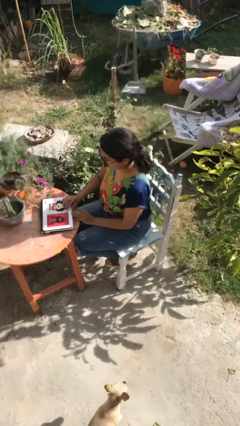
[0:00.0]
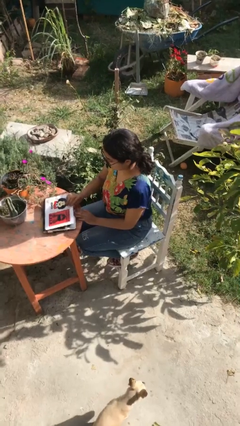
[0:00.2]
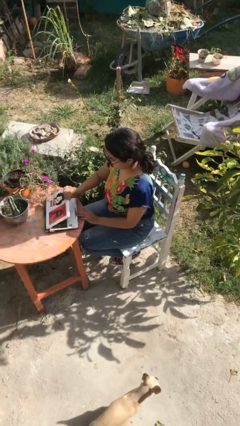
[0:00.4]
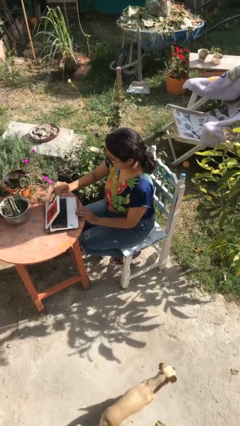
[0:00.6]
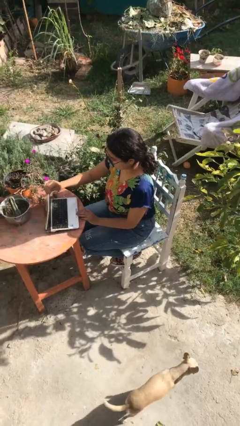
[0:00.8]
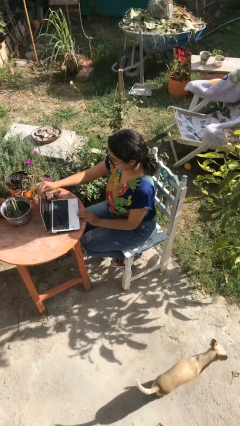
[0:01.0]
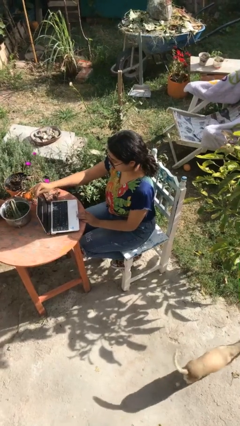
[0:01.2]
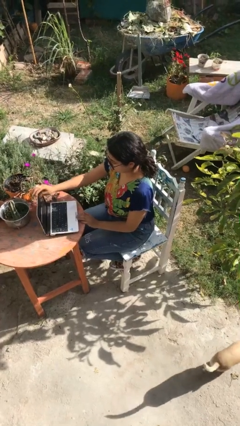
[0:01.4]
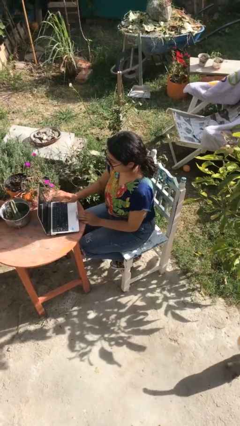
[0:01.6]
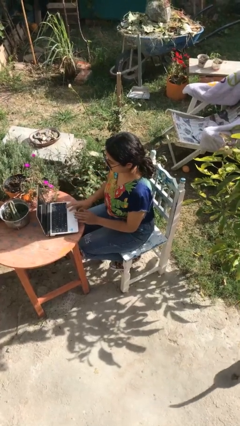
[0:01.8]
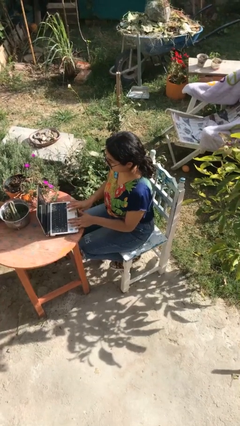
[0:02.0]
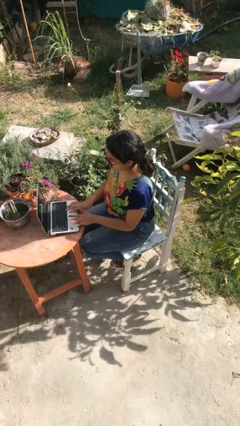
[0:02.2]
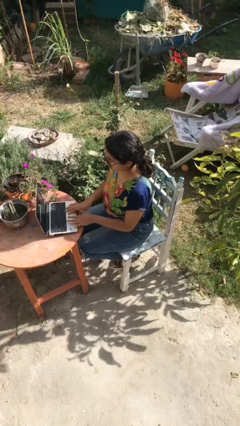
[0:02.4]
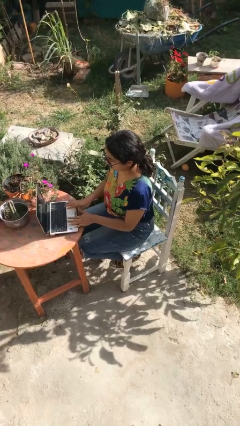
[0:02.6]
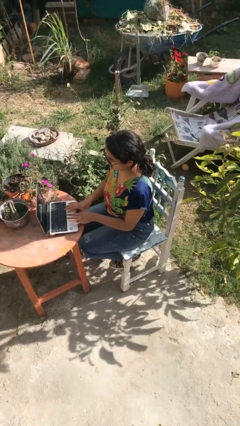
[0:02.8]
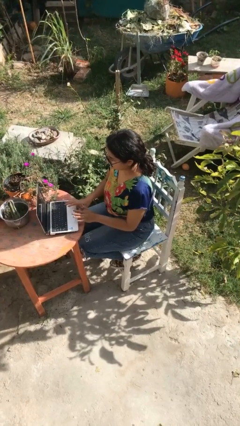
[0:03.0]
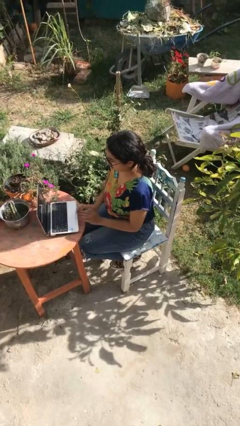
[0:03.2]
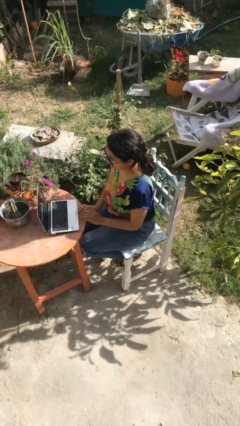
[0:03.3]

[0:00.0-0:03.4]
person opens laptop

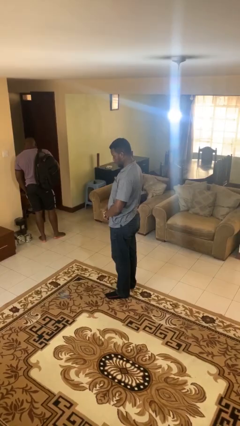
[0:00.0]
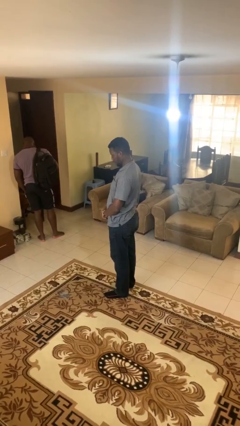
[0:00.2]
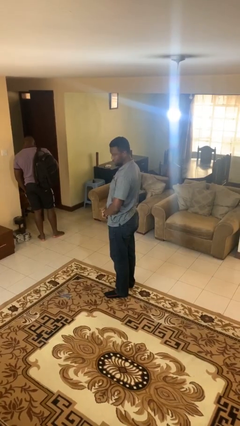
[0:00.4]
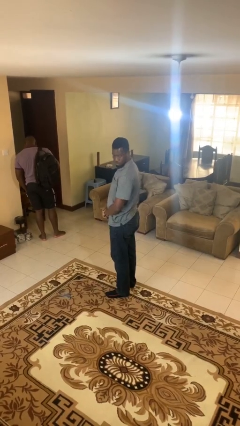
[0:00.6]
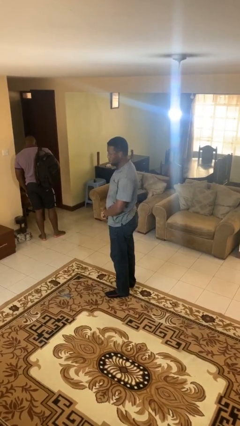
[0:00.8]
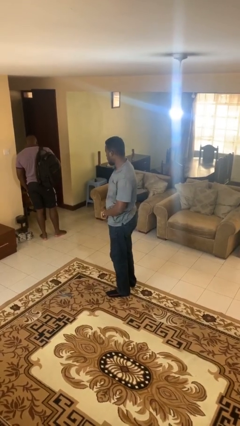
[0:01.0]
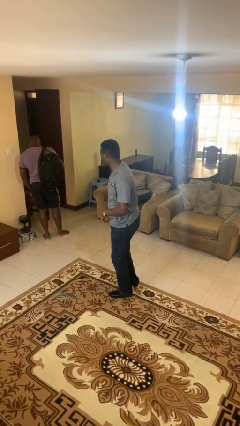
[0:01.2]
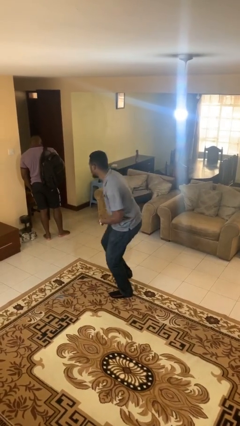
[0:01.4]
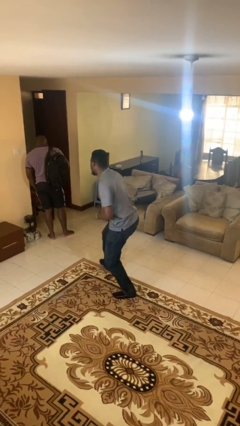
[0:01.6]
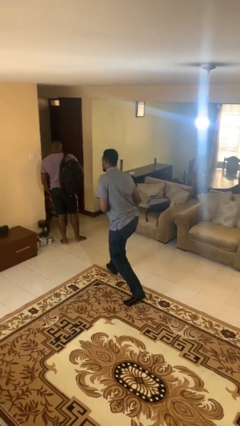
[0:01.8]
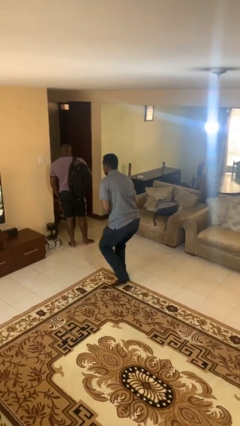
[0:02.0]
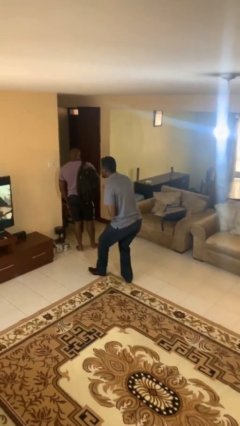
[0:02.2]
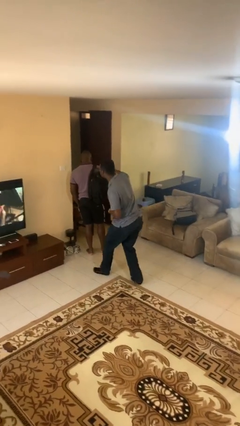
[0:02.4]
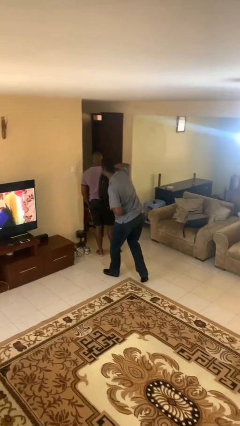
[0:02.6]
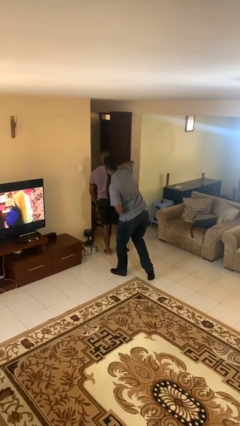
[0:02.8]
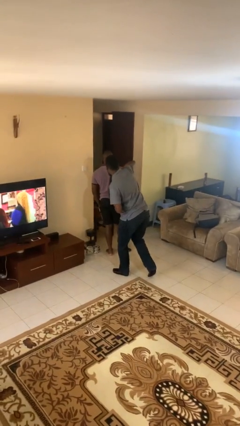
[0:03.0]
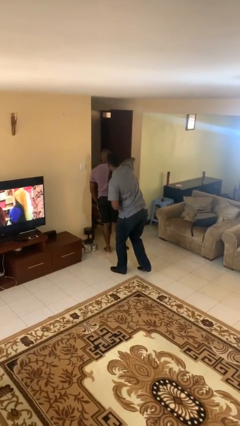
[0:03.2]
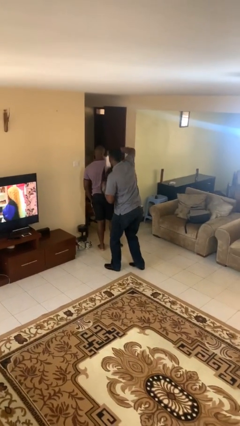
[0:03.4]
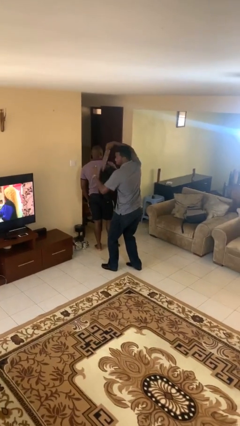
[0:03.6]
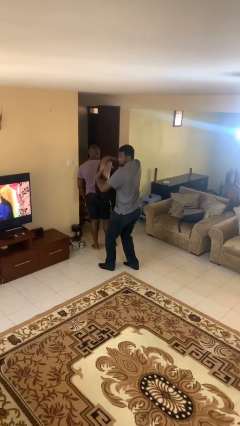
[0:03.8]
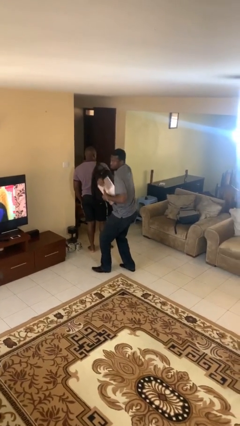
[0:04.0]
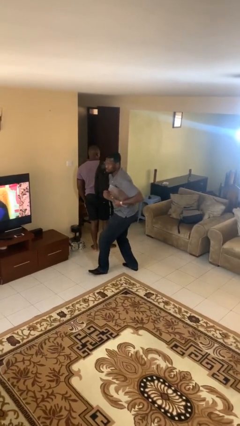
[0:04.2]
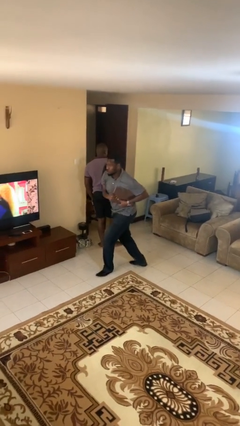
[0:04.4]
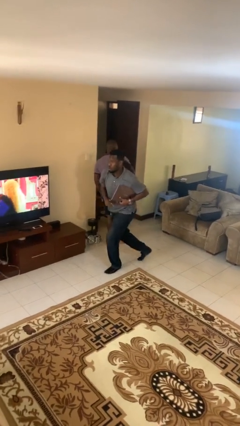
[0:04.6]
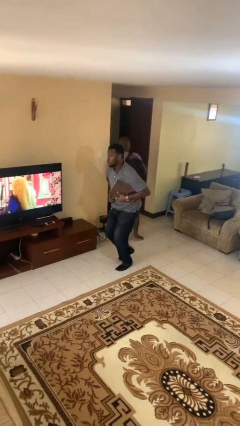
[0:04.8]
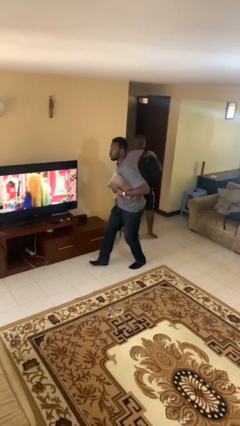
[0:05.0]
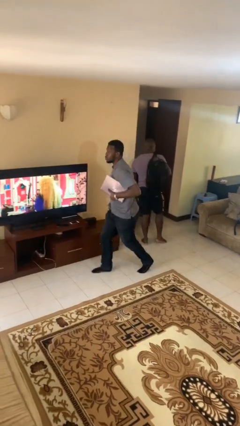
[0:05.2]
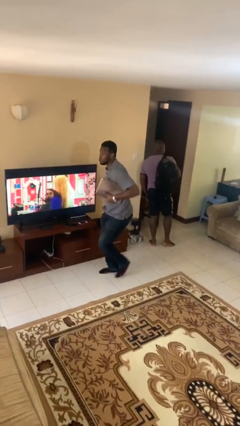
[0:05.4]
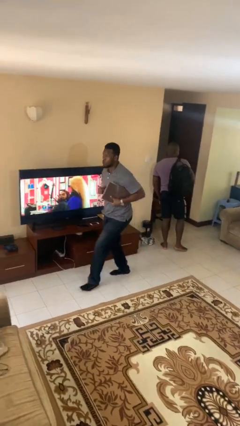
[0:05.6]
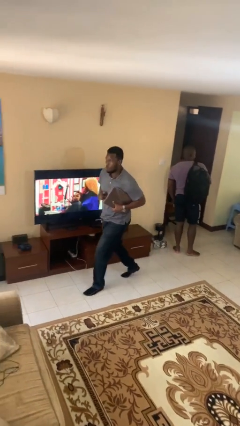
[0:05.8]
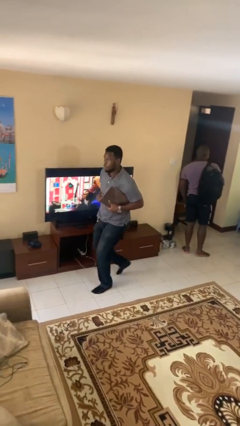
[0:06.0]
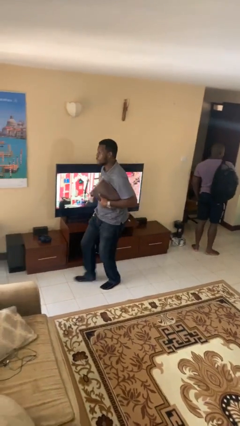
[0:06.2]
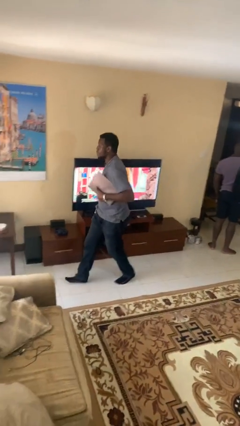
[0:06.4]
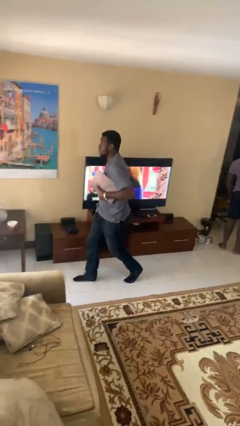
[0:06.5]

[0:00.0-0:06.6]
person steals object from person

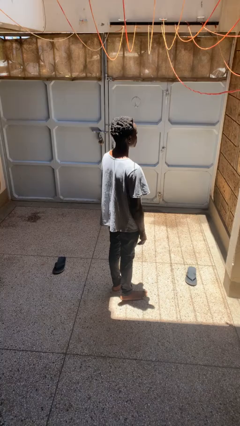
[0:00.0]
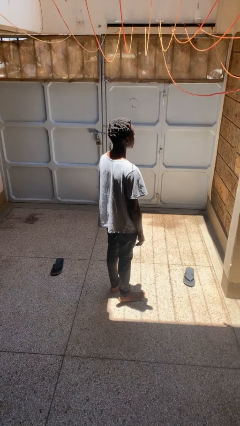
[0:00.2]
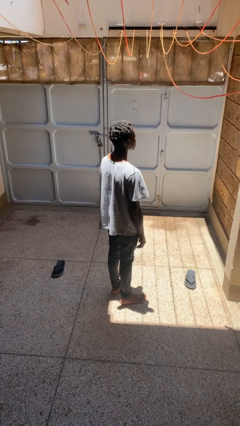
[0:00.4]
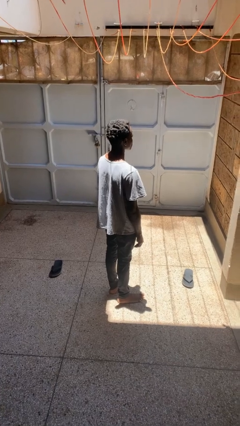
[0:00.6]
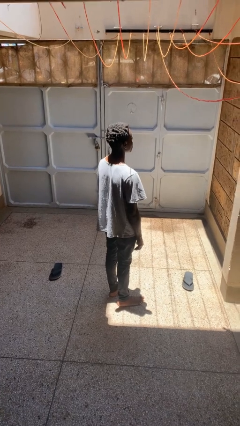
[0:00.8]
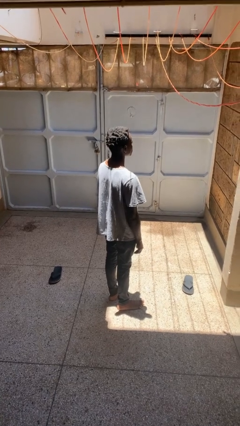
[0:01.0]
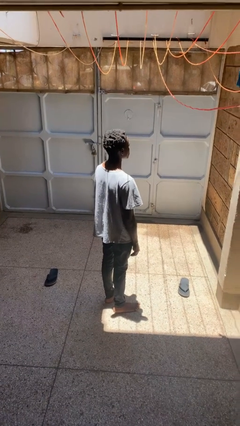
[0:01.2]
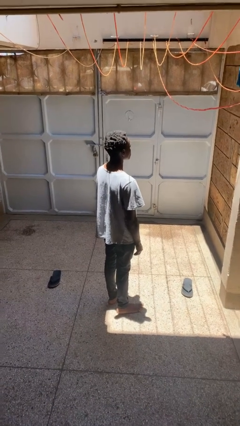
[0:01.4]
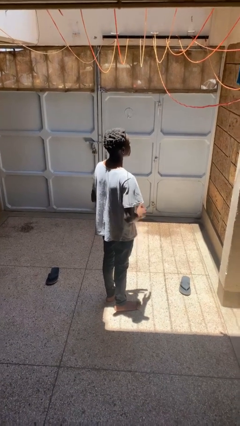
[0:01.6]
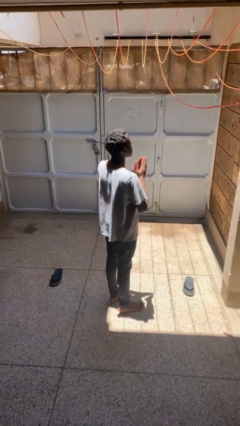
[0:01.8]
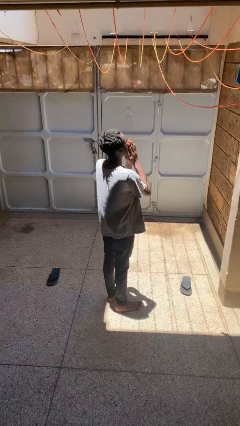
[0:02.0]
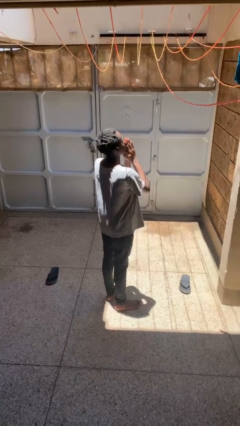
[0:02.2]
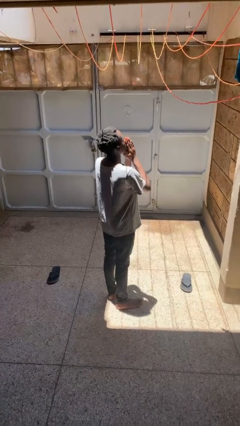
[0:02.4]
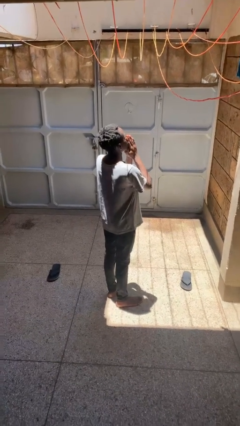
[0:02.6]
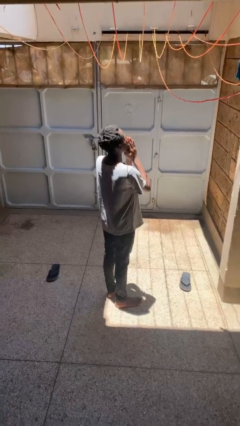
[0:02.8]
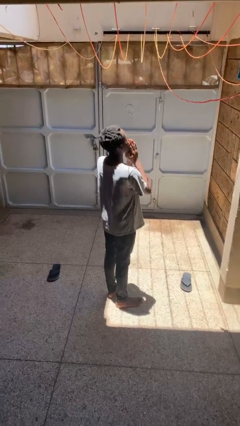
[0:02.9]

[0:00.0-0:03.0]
person prays

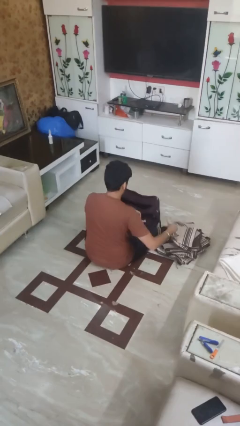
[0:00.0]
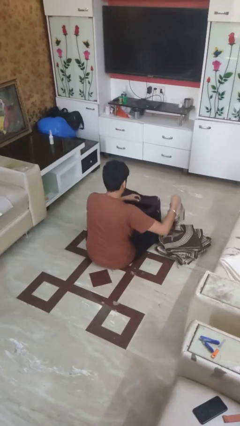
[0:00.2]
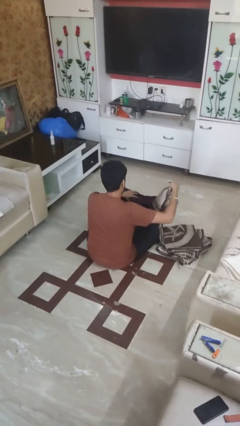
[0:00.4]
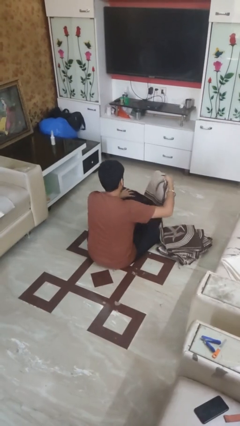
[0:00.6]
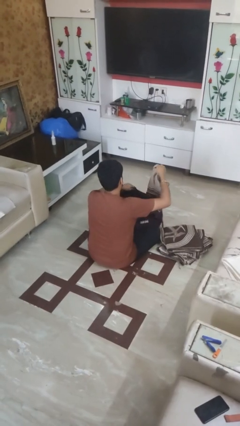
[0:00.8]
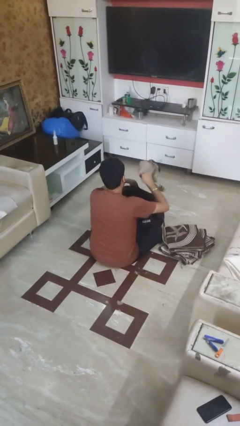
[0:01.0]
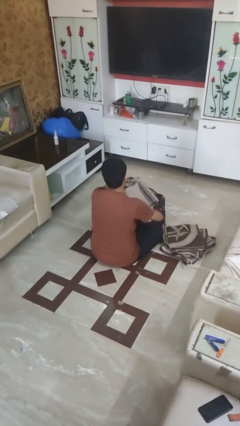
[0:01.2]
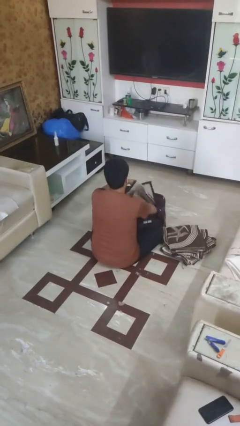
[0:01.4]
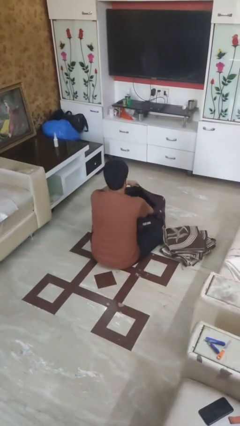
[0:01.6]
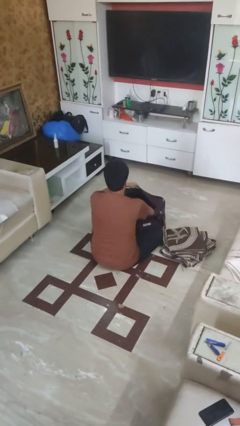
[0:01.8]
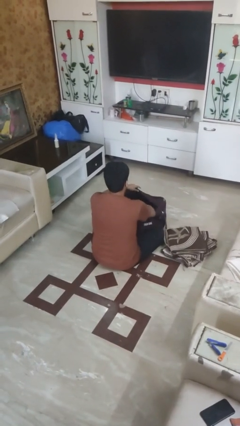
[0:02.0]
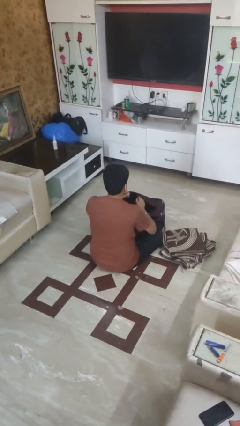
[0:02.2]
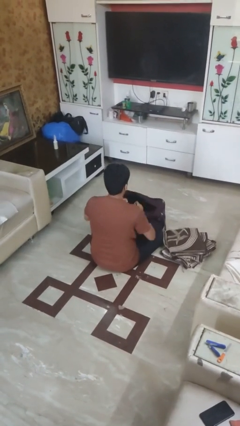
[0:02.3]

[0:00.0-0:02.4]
person loads clothes into suitcase

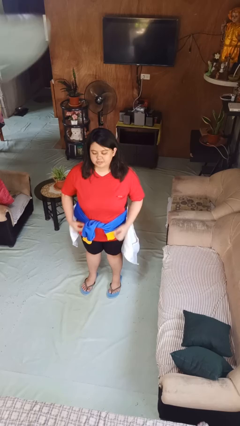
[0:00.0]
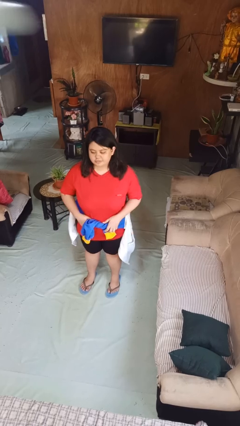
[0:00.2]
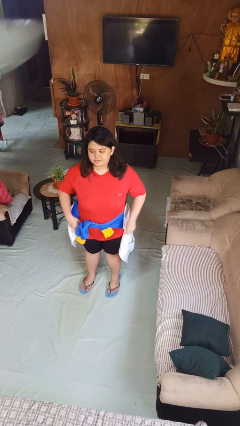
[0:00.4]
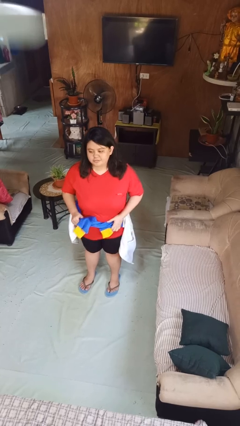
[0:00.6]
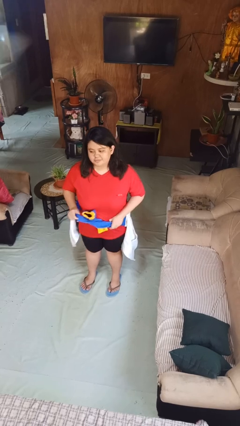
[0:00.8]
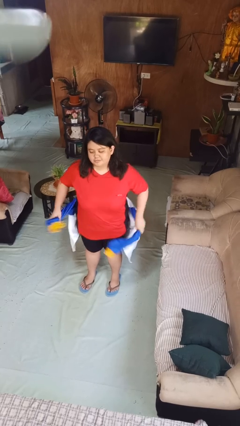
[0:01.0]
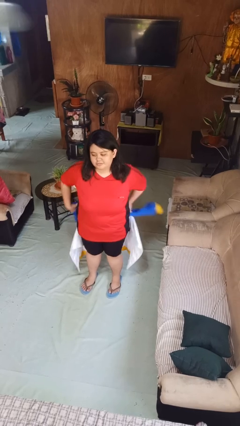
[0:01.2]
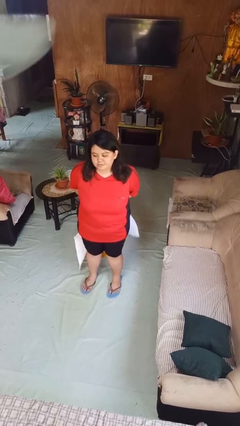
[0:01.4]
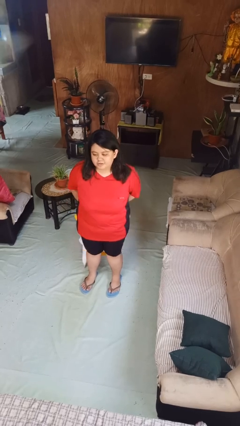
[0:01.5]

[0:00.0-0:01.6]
person unties jacket around waist

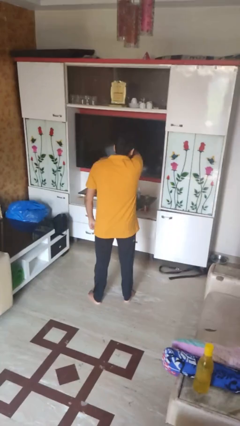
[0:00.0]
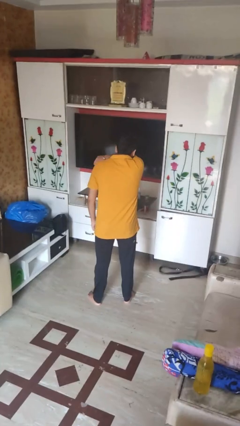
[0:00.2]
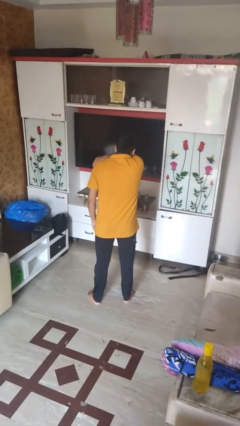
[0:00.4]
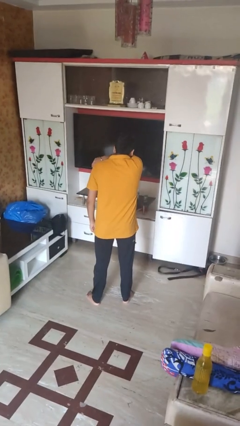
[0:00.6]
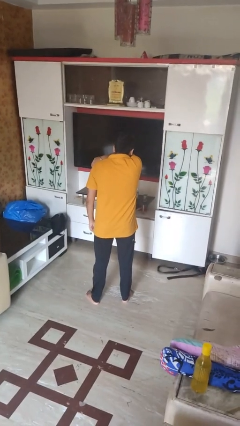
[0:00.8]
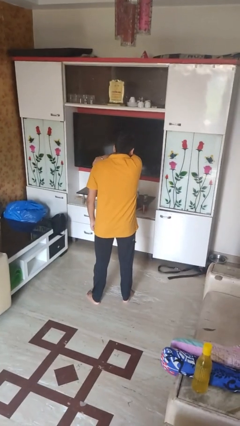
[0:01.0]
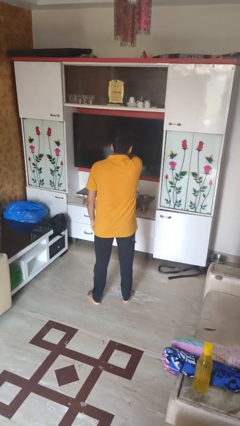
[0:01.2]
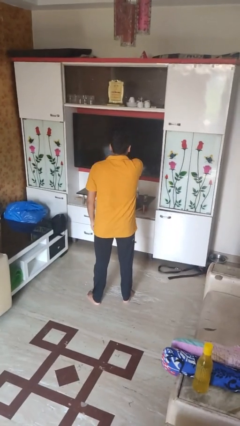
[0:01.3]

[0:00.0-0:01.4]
person sneezes into arm
